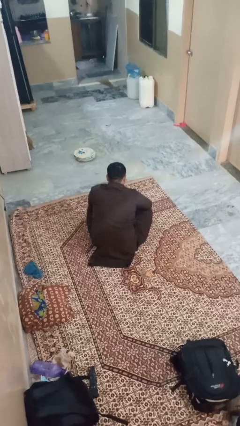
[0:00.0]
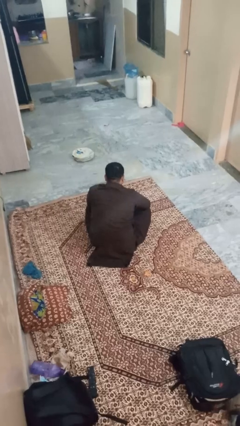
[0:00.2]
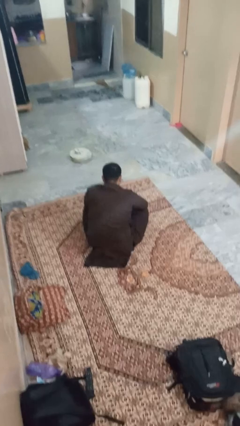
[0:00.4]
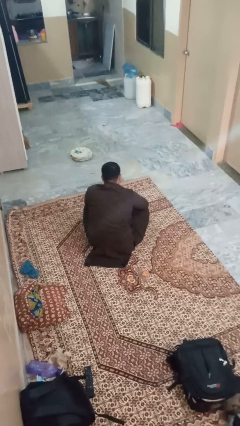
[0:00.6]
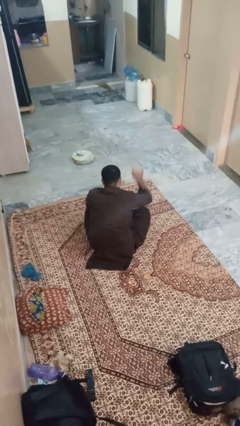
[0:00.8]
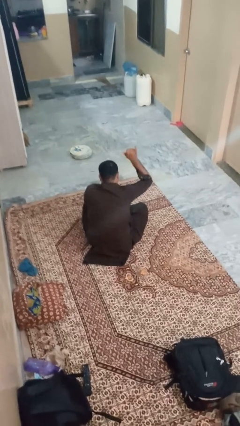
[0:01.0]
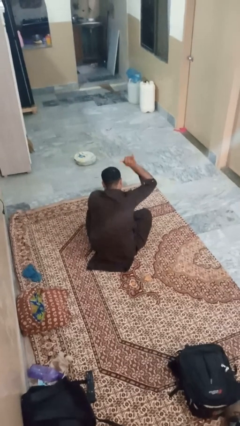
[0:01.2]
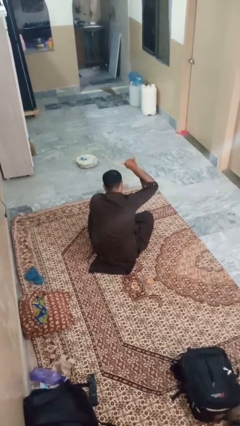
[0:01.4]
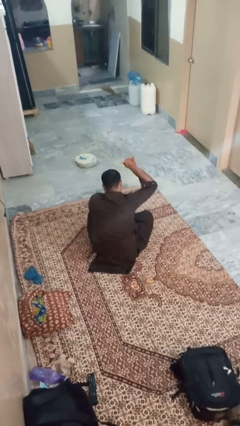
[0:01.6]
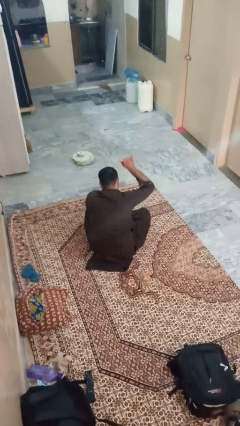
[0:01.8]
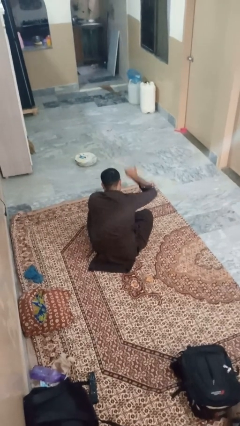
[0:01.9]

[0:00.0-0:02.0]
person gestures hang loose

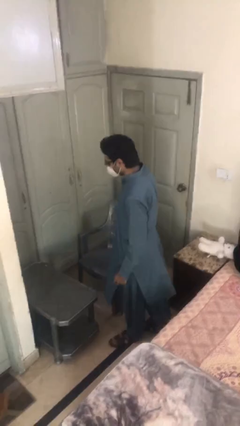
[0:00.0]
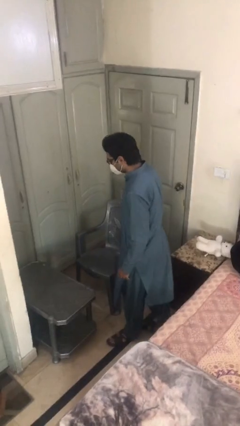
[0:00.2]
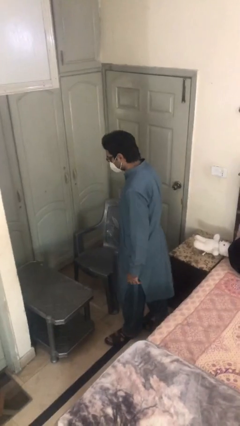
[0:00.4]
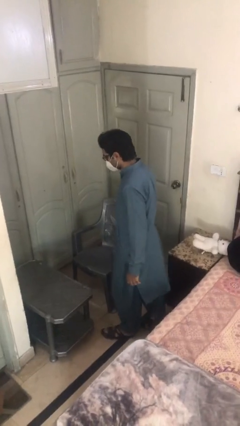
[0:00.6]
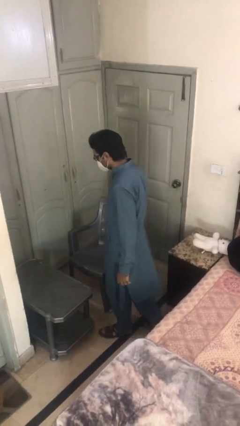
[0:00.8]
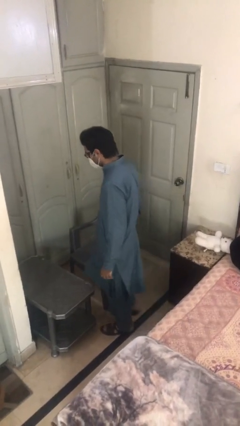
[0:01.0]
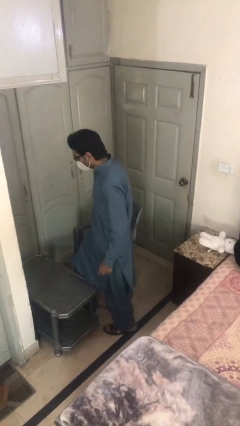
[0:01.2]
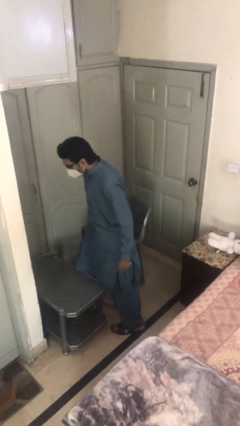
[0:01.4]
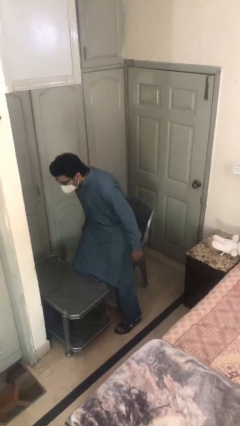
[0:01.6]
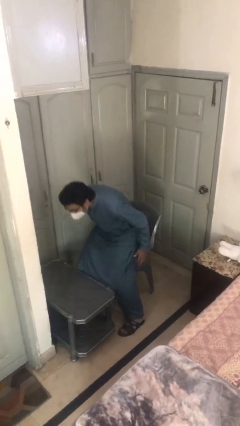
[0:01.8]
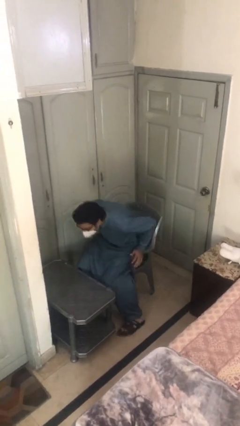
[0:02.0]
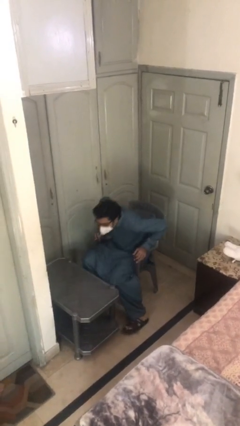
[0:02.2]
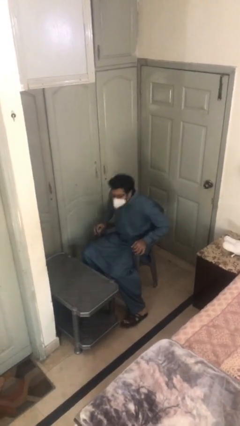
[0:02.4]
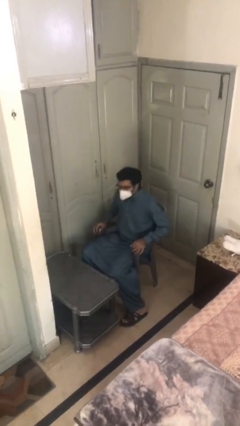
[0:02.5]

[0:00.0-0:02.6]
person sits down

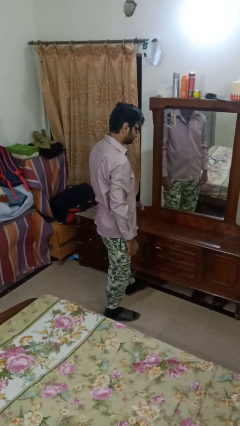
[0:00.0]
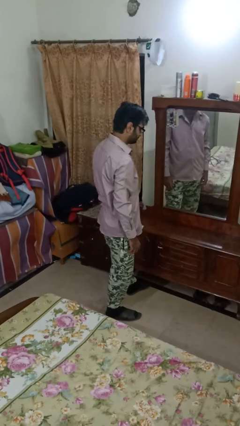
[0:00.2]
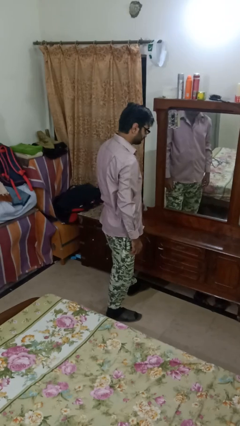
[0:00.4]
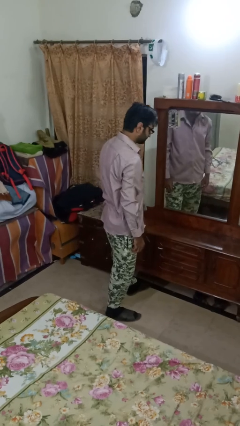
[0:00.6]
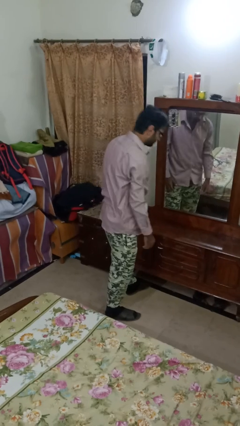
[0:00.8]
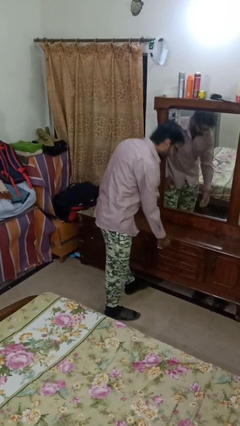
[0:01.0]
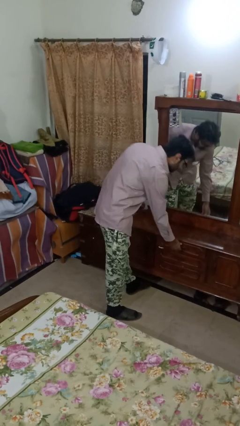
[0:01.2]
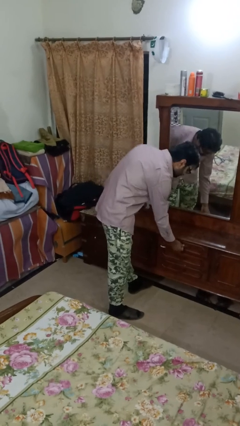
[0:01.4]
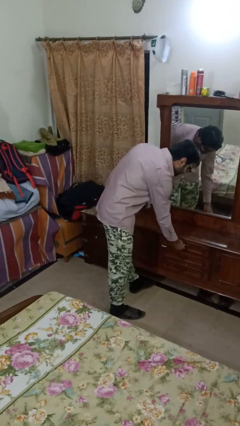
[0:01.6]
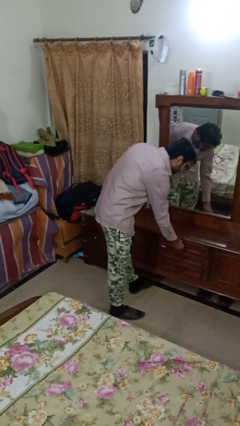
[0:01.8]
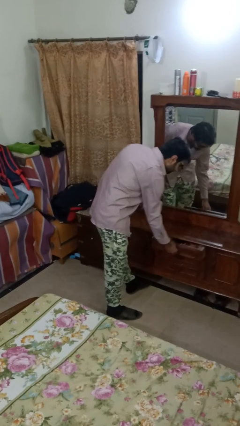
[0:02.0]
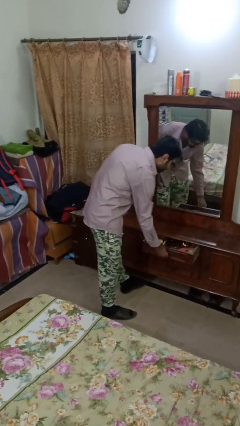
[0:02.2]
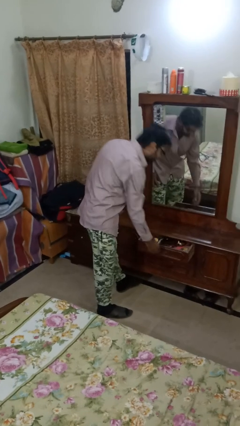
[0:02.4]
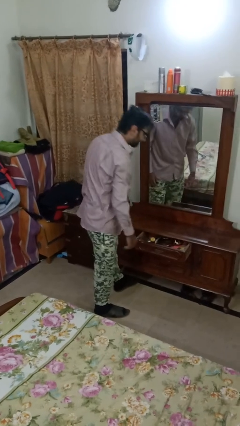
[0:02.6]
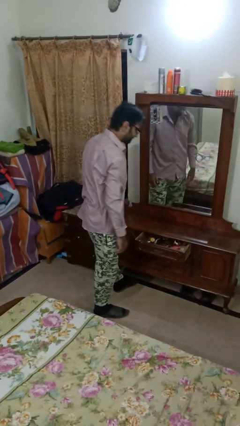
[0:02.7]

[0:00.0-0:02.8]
person opens dresser drawer

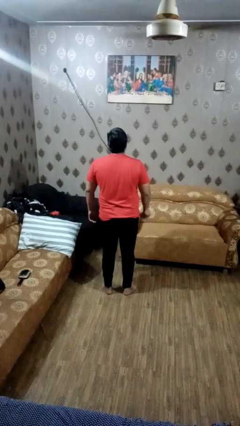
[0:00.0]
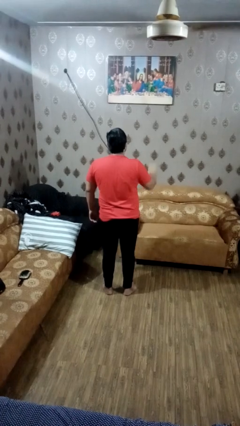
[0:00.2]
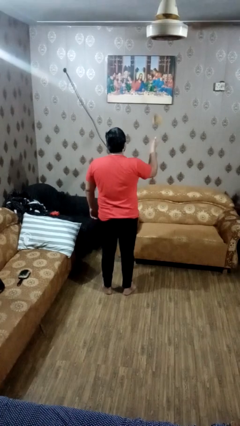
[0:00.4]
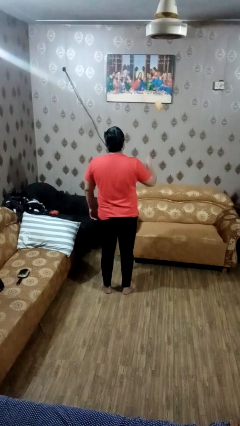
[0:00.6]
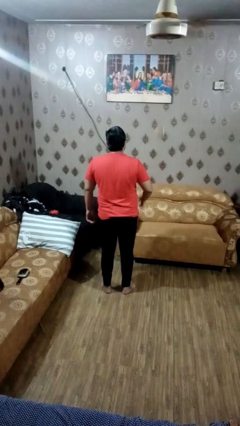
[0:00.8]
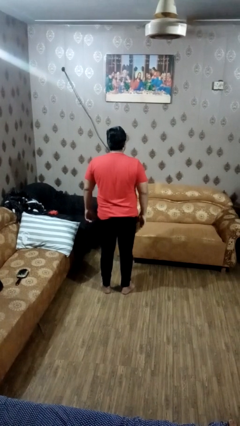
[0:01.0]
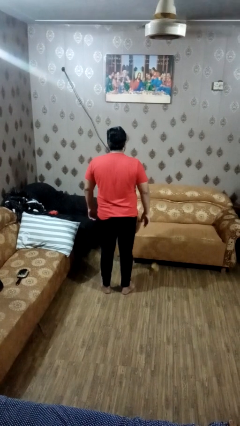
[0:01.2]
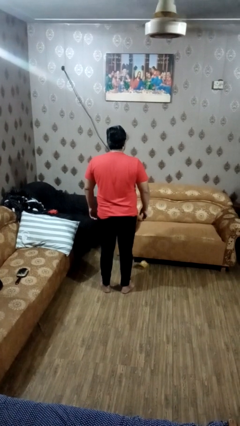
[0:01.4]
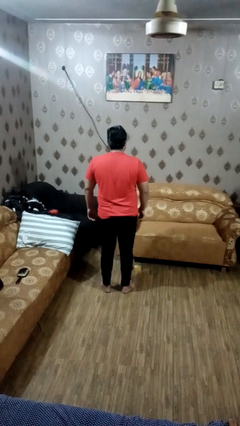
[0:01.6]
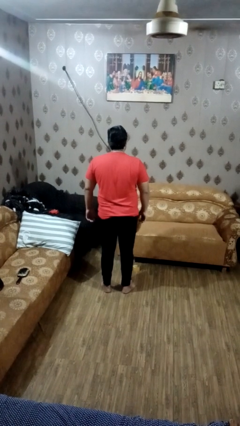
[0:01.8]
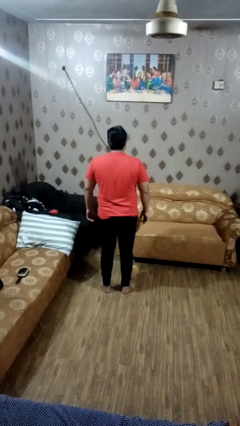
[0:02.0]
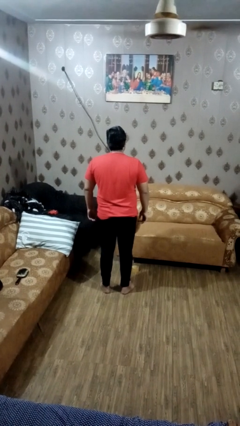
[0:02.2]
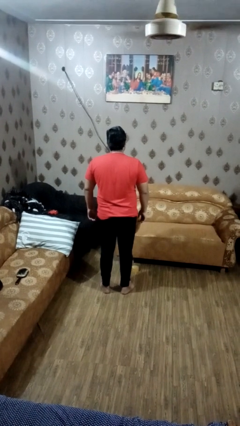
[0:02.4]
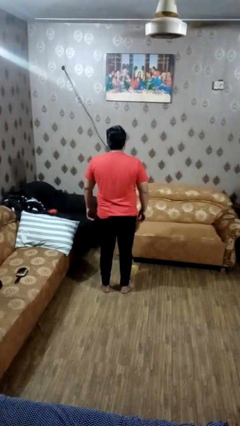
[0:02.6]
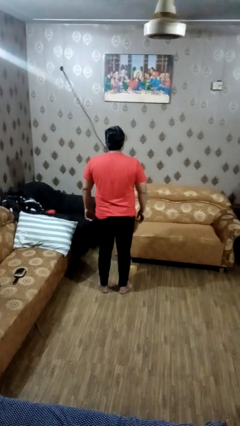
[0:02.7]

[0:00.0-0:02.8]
person throws object into air

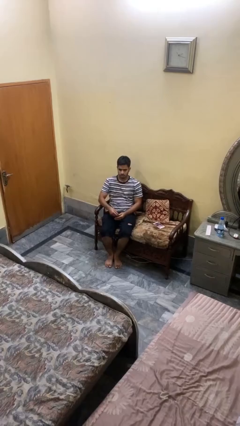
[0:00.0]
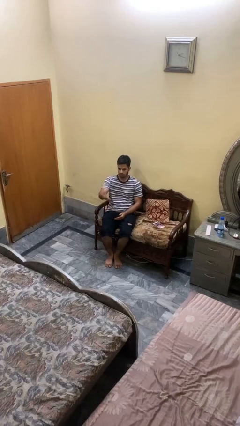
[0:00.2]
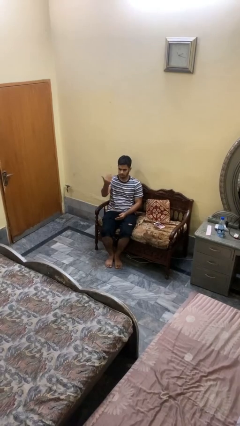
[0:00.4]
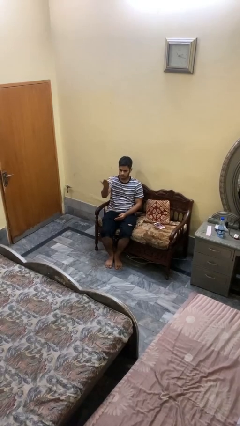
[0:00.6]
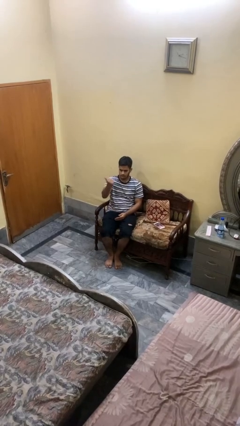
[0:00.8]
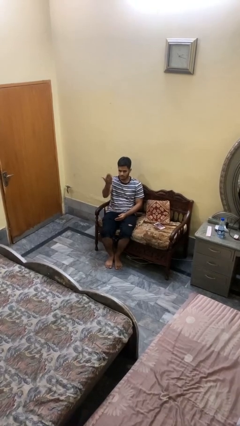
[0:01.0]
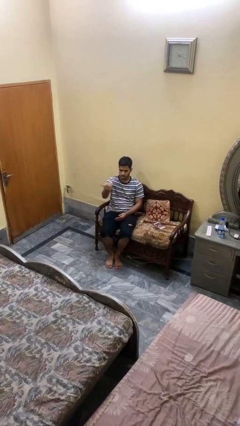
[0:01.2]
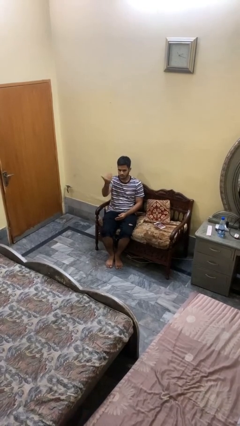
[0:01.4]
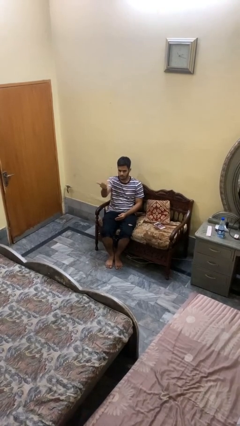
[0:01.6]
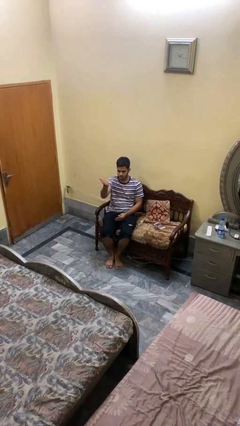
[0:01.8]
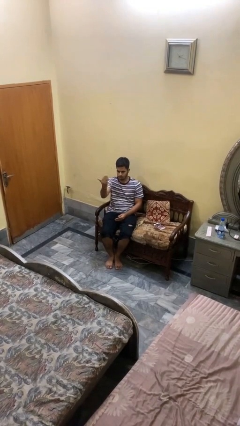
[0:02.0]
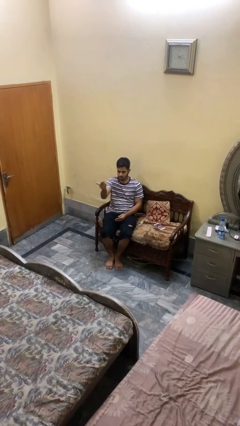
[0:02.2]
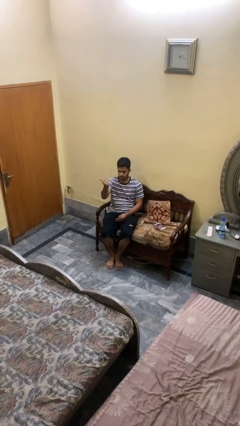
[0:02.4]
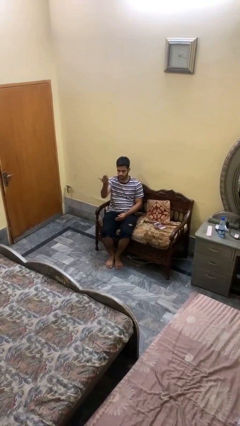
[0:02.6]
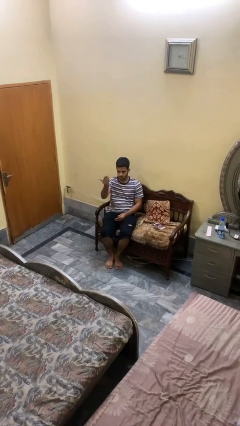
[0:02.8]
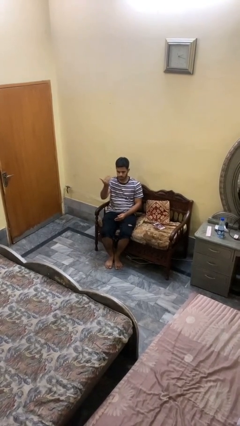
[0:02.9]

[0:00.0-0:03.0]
person gestures come here

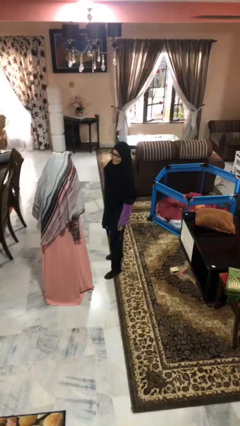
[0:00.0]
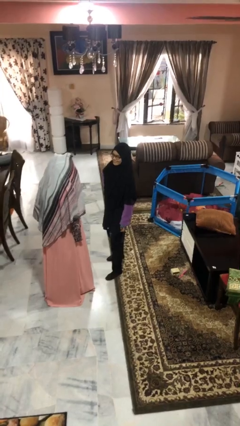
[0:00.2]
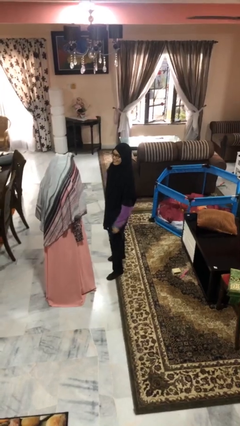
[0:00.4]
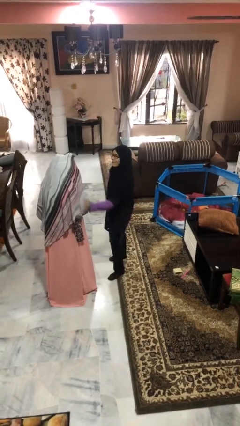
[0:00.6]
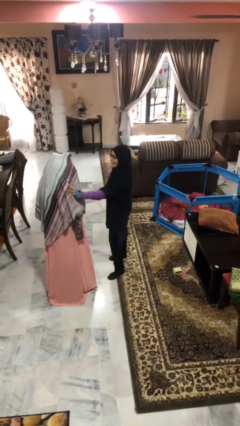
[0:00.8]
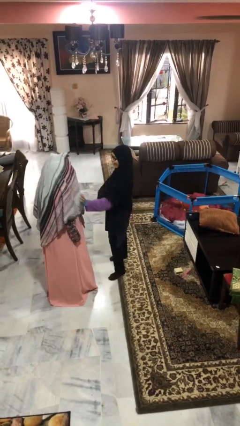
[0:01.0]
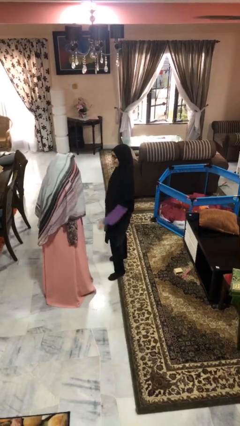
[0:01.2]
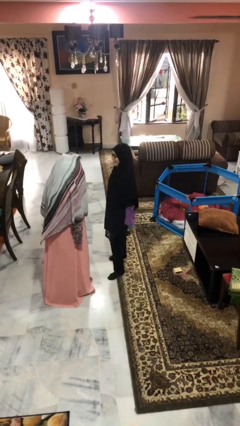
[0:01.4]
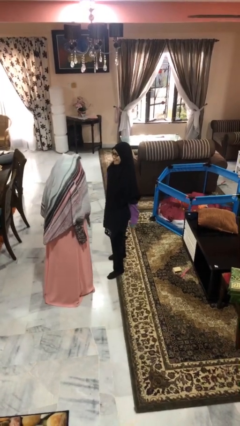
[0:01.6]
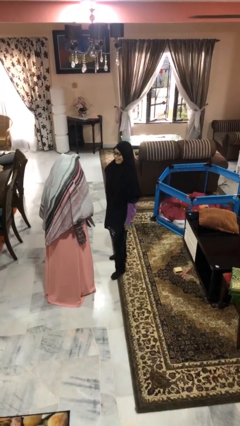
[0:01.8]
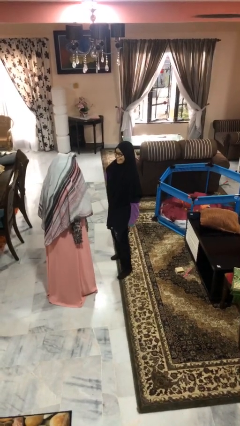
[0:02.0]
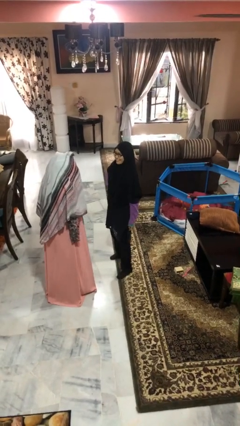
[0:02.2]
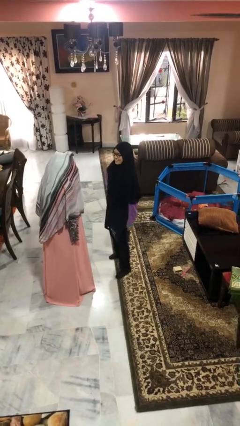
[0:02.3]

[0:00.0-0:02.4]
person shoves person

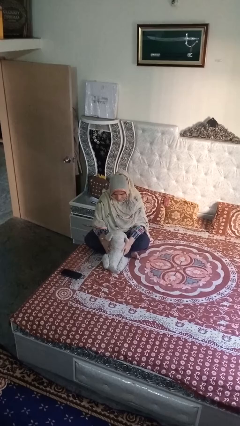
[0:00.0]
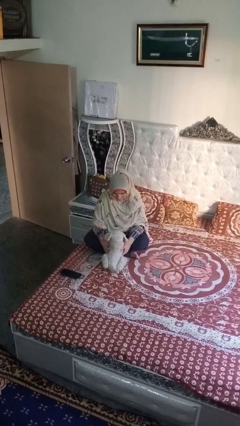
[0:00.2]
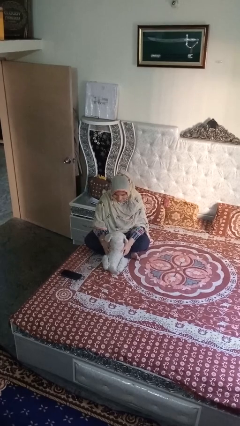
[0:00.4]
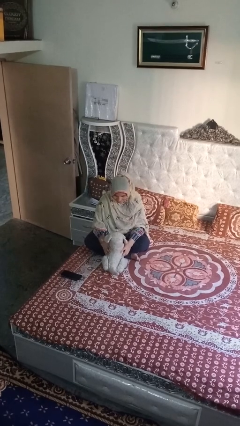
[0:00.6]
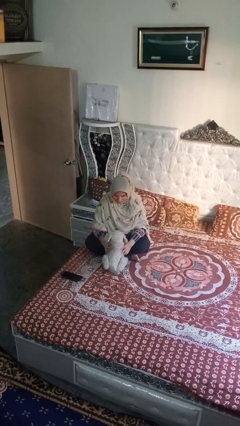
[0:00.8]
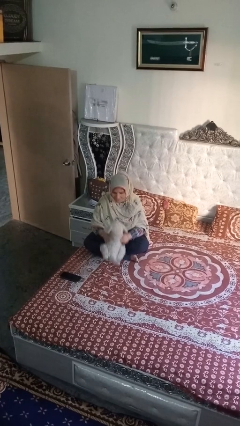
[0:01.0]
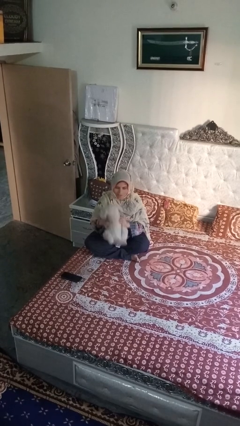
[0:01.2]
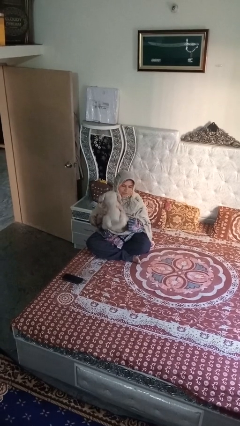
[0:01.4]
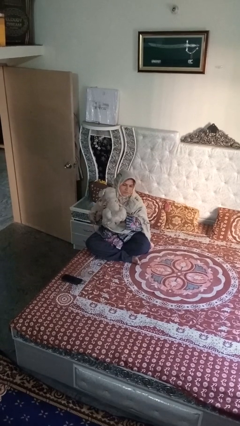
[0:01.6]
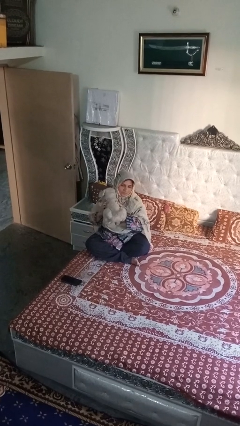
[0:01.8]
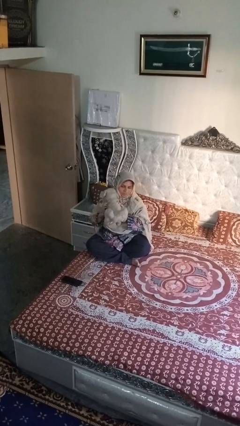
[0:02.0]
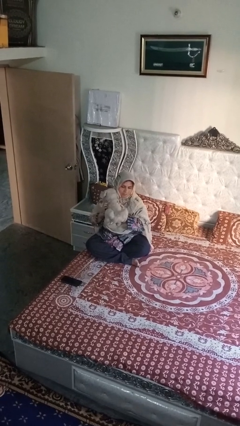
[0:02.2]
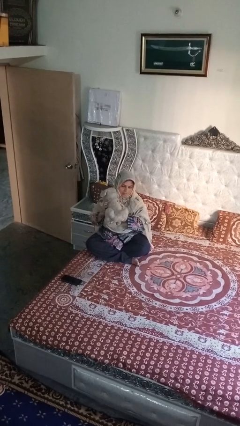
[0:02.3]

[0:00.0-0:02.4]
person hugs dog
